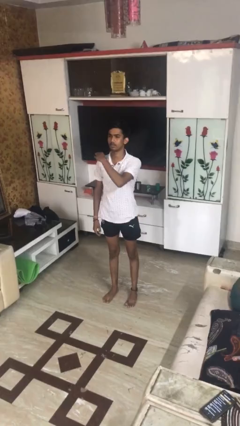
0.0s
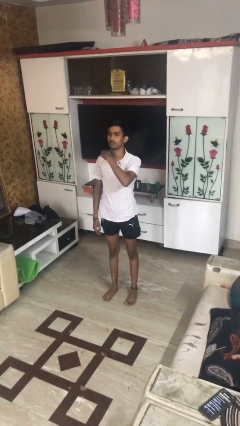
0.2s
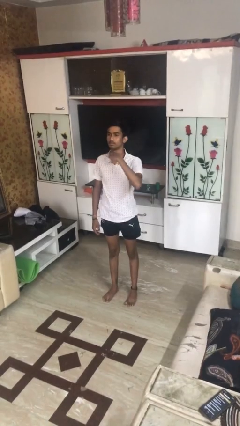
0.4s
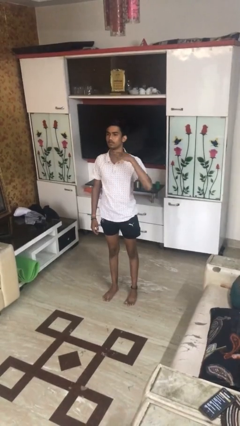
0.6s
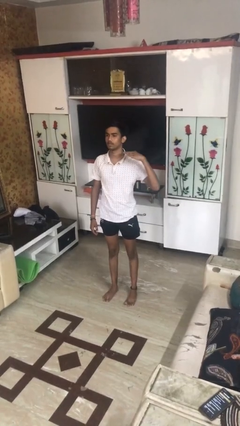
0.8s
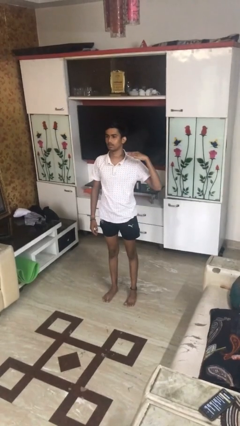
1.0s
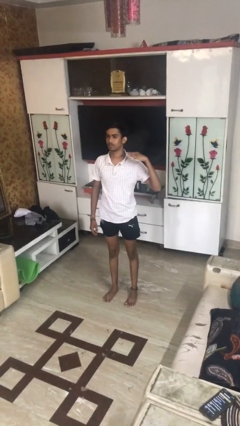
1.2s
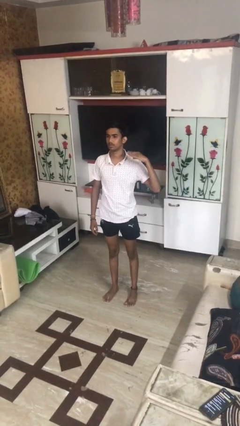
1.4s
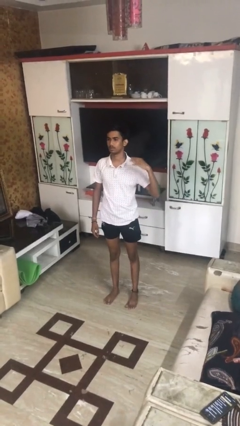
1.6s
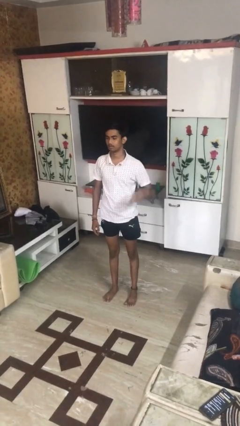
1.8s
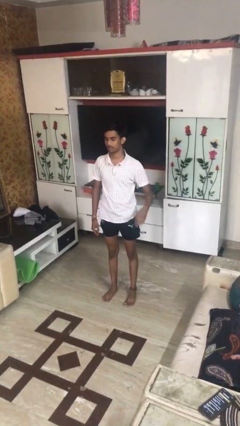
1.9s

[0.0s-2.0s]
person gestures cut

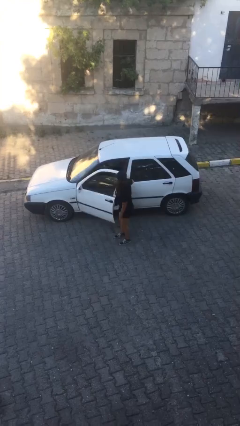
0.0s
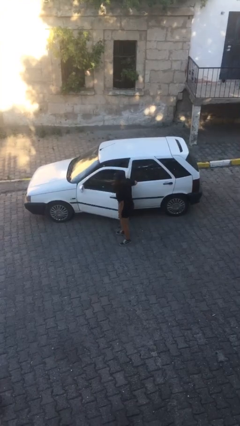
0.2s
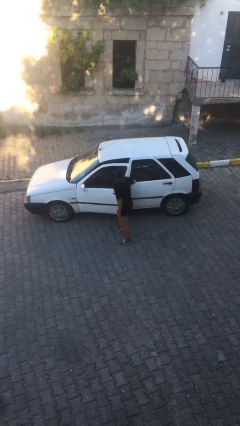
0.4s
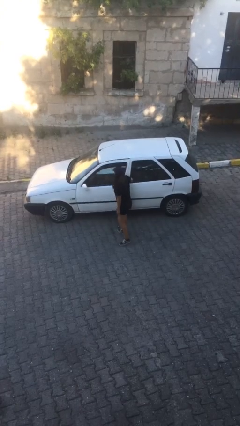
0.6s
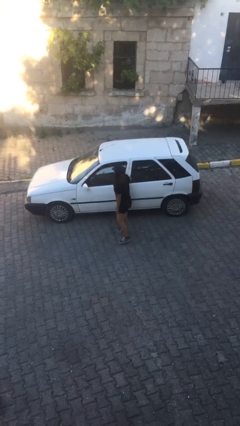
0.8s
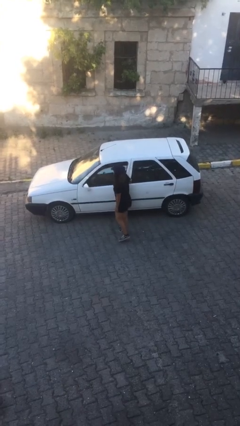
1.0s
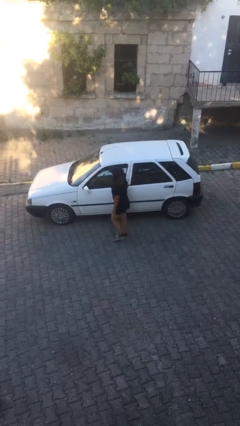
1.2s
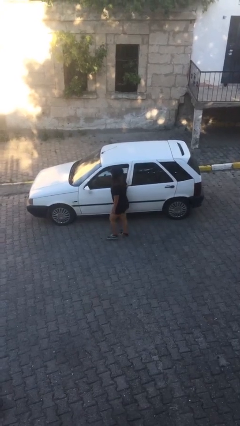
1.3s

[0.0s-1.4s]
person closes car door

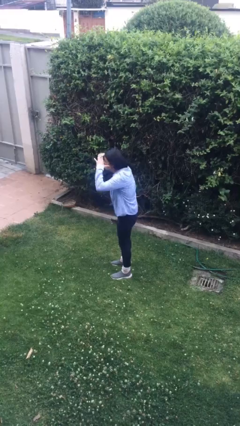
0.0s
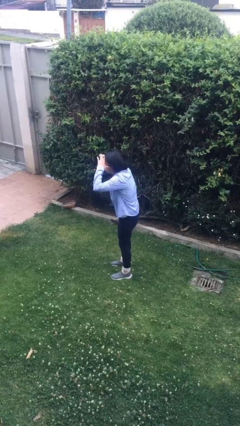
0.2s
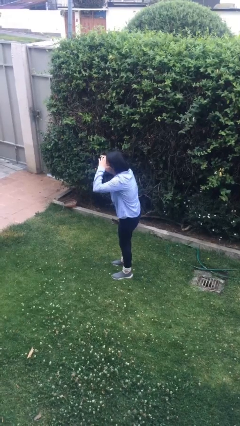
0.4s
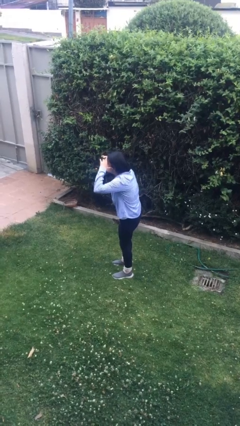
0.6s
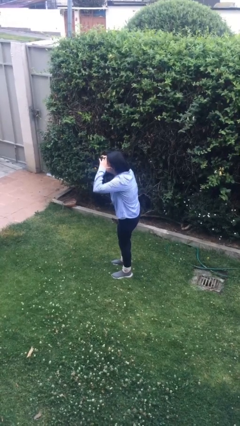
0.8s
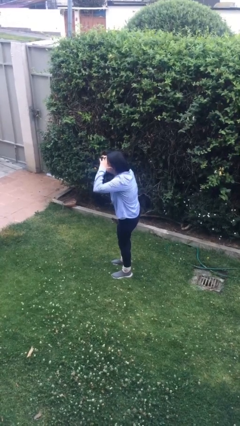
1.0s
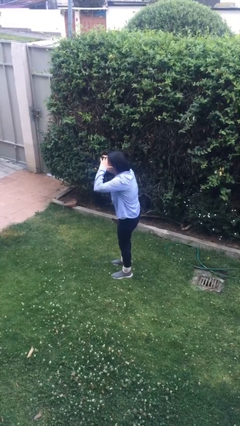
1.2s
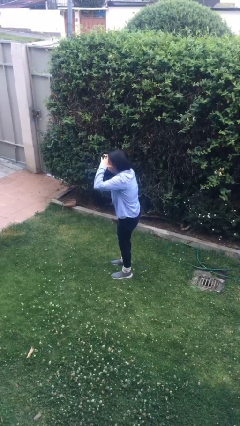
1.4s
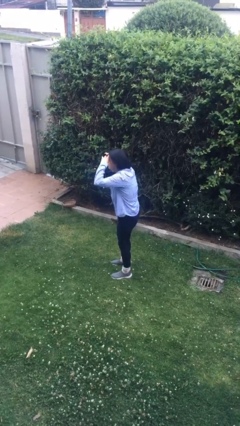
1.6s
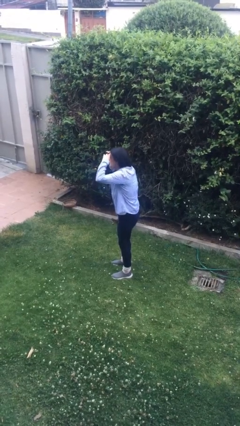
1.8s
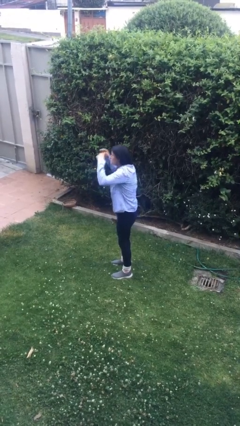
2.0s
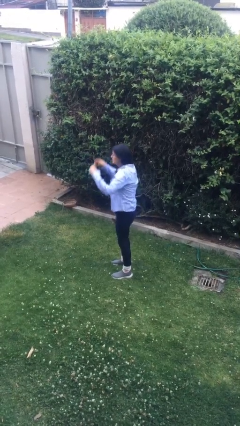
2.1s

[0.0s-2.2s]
person shades eyes

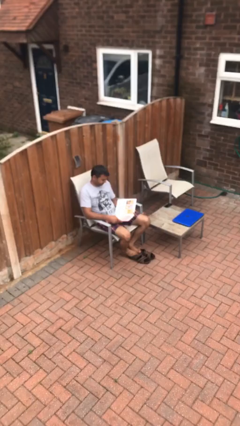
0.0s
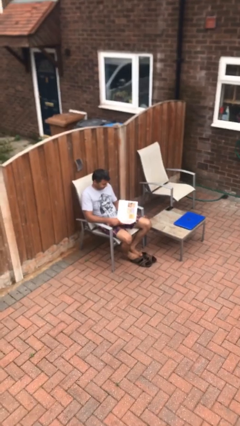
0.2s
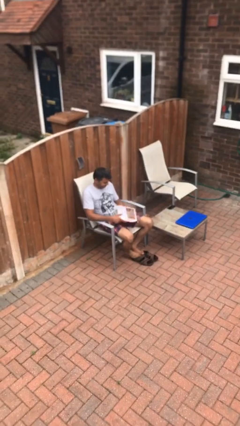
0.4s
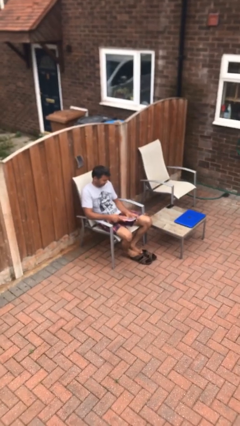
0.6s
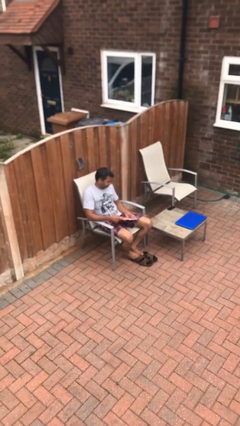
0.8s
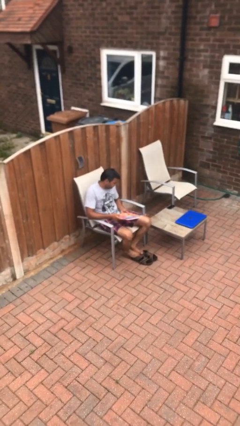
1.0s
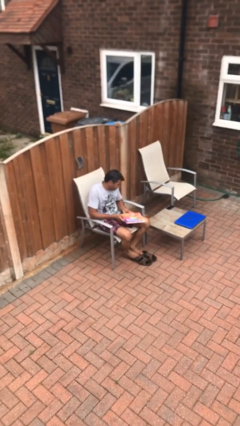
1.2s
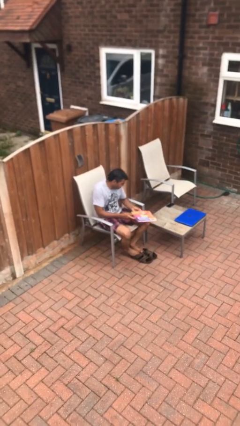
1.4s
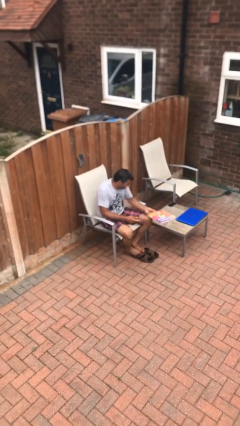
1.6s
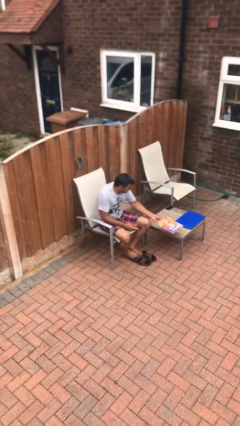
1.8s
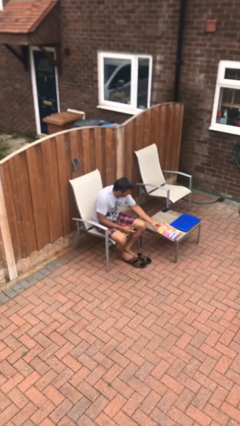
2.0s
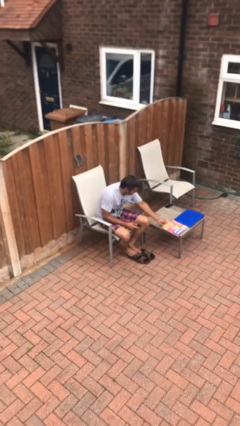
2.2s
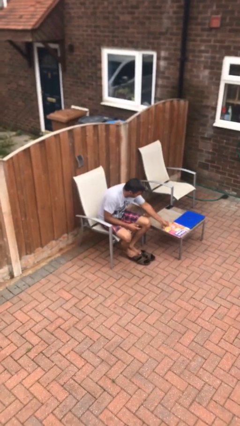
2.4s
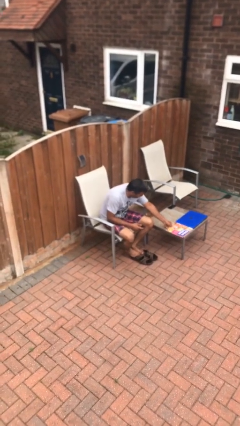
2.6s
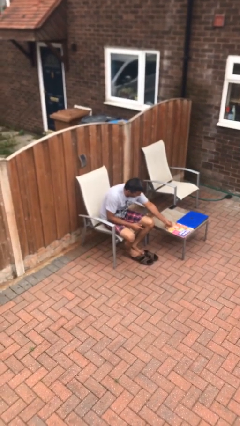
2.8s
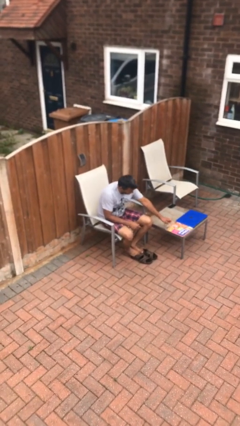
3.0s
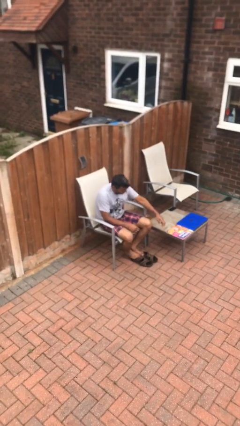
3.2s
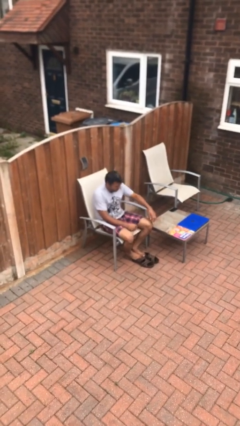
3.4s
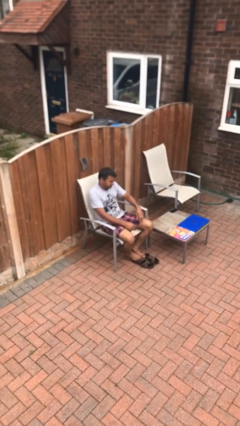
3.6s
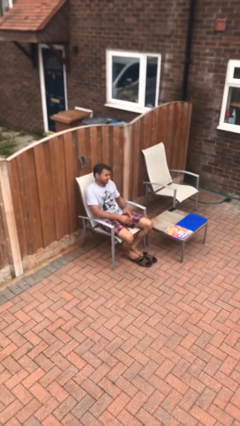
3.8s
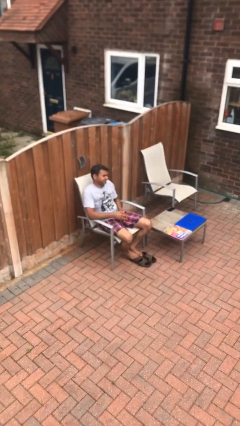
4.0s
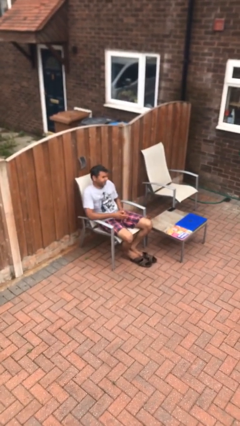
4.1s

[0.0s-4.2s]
person puts down object on table

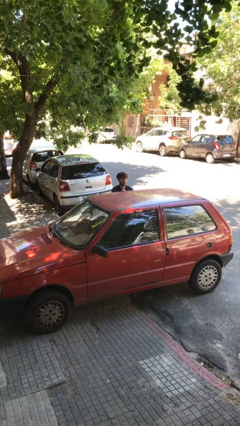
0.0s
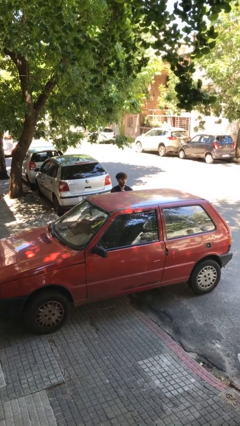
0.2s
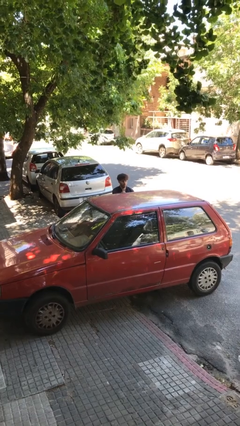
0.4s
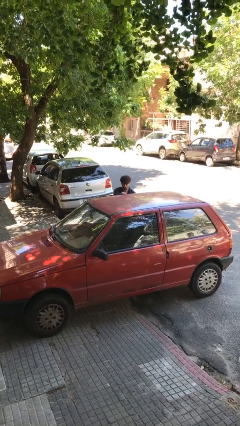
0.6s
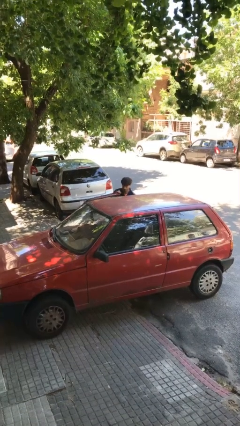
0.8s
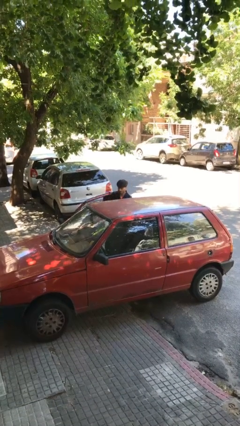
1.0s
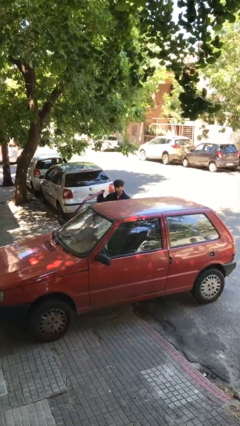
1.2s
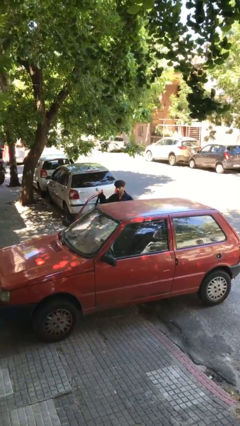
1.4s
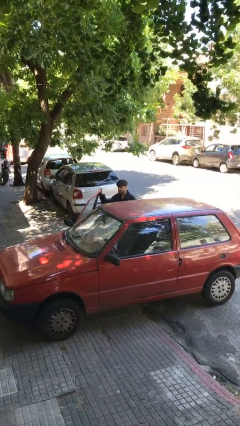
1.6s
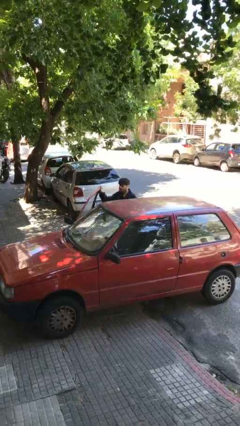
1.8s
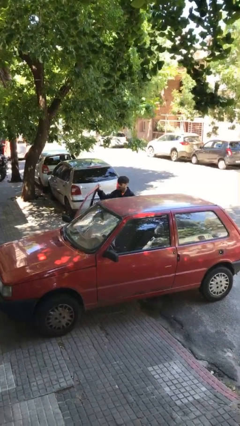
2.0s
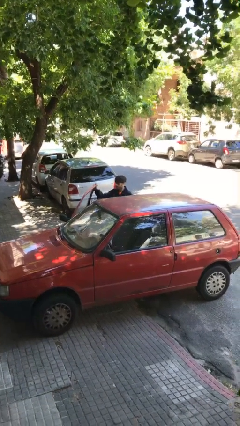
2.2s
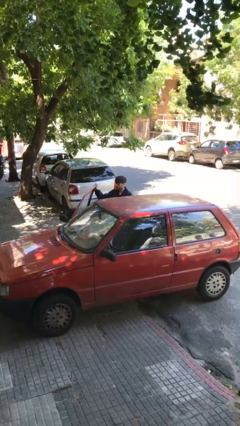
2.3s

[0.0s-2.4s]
person opens car door

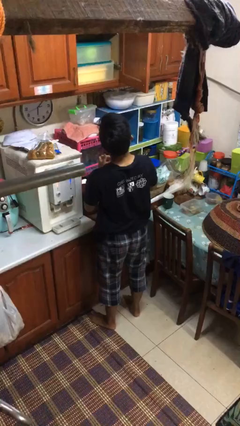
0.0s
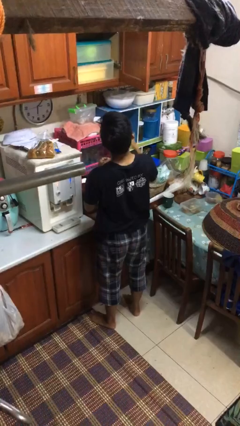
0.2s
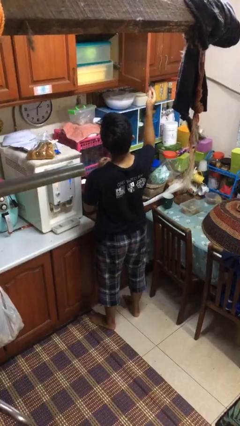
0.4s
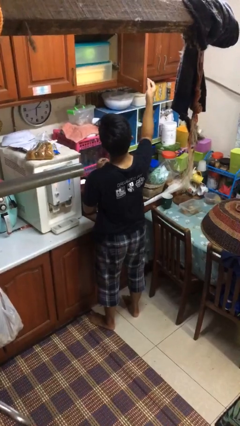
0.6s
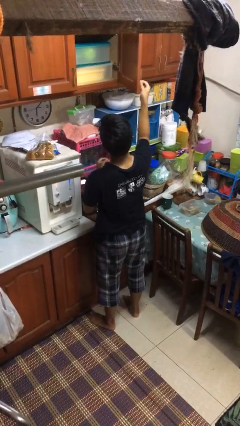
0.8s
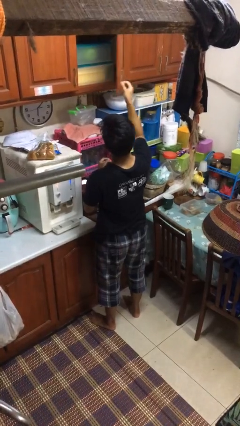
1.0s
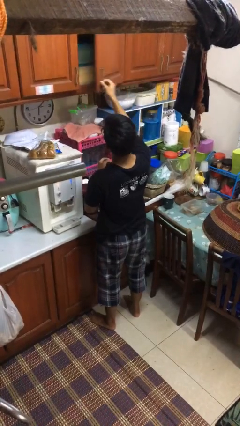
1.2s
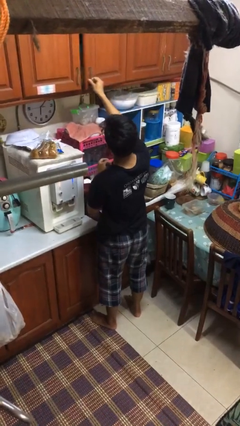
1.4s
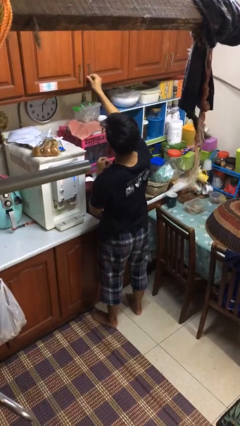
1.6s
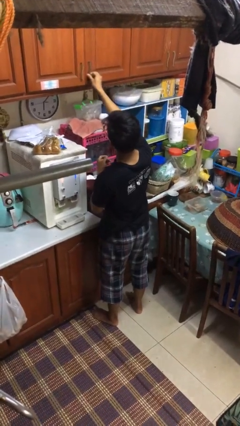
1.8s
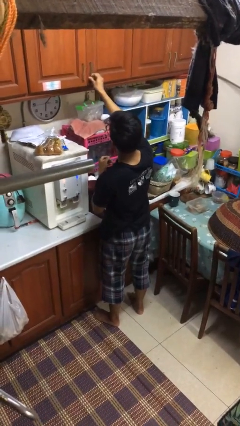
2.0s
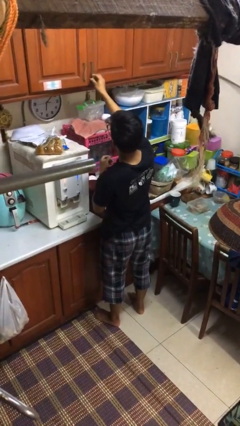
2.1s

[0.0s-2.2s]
person closes kitchen drawer

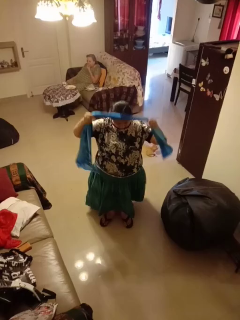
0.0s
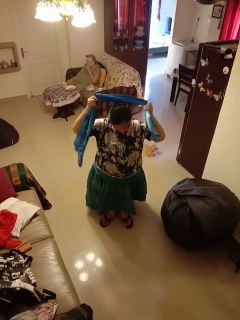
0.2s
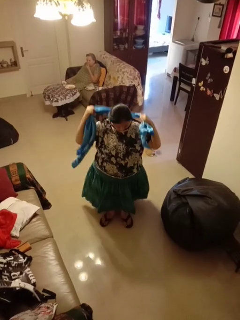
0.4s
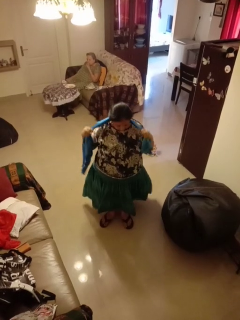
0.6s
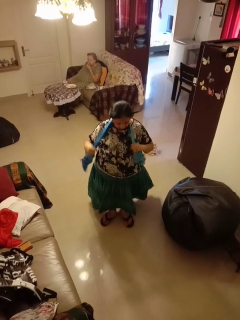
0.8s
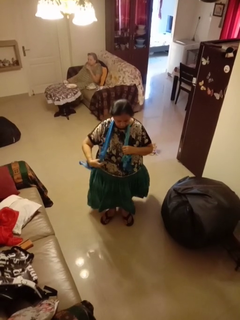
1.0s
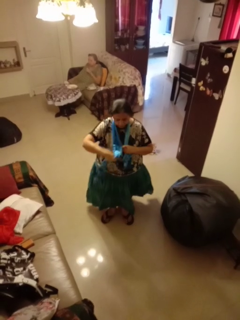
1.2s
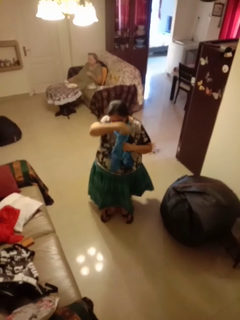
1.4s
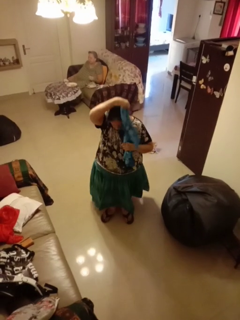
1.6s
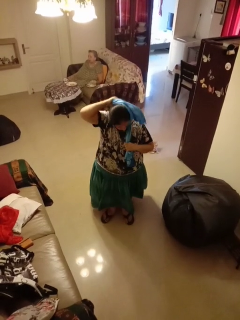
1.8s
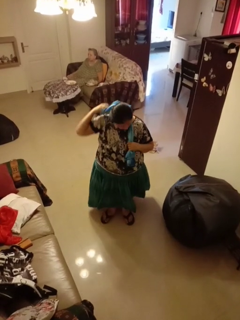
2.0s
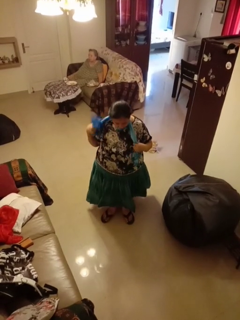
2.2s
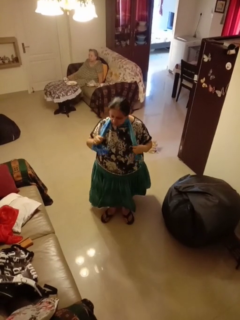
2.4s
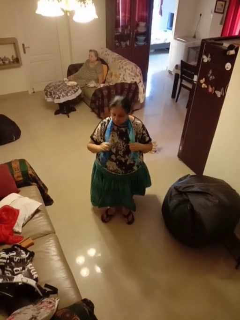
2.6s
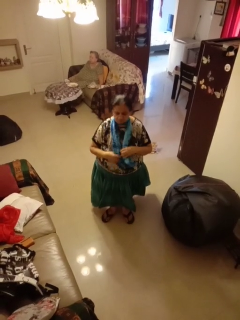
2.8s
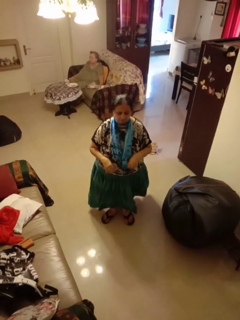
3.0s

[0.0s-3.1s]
person puts on scarf

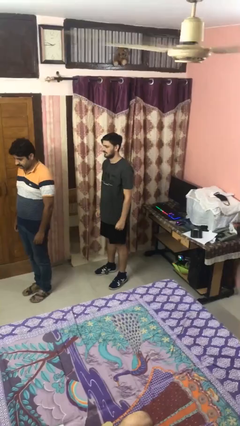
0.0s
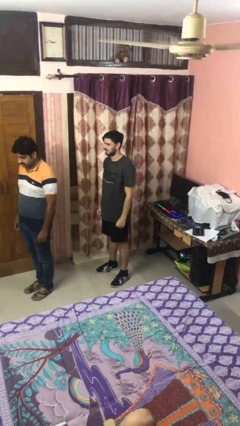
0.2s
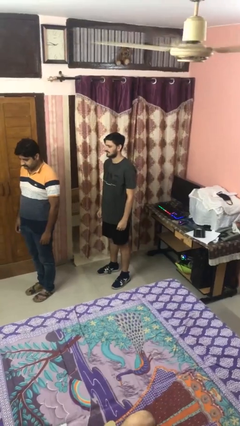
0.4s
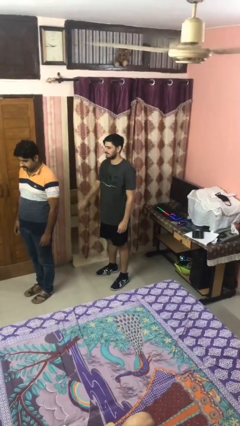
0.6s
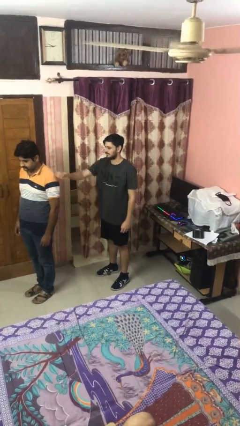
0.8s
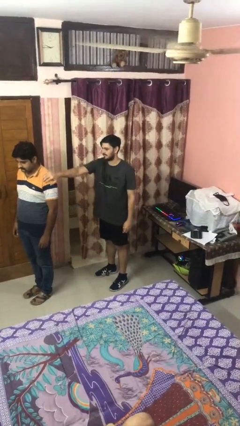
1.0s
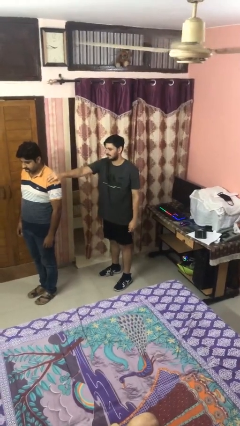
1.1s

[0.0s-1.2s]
person grabs person by shoulder
